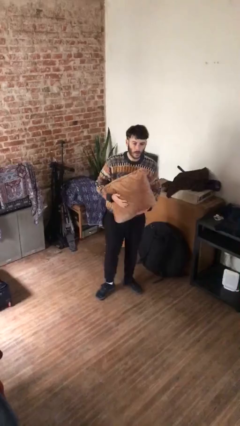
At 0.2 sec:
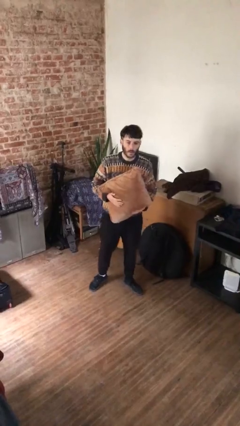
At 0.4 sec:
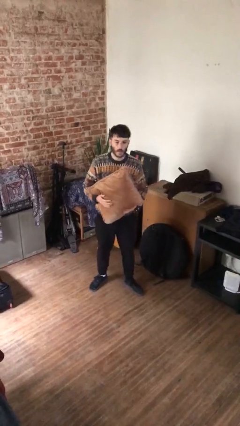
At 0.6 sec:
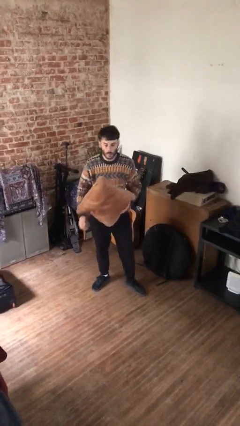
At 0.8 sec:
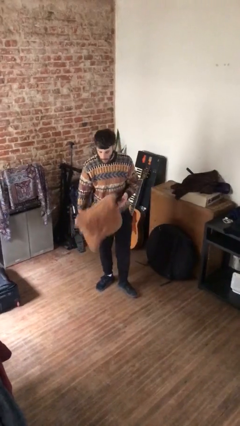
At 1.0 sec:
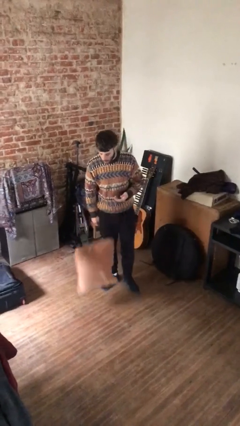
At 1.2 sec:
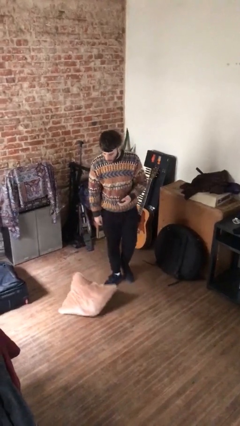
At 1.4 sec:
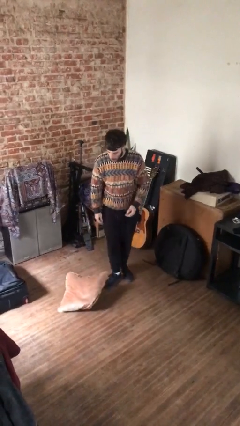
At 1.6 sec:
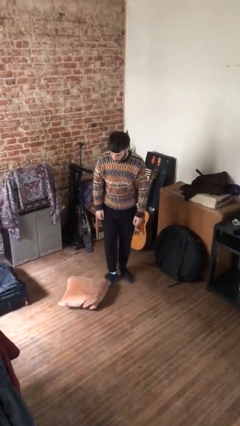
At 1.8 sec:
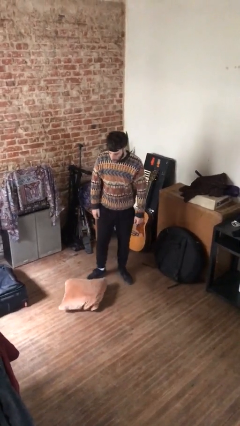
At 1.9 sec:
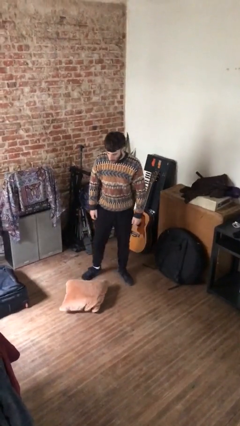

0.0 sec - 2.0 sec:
person drops object

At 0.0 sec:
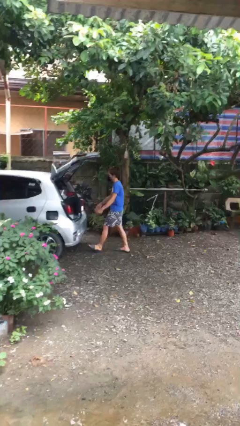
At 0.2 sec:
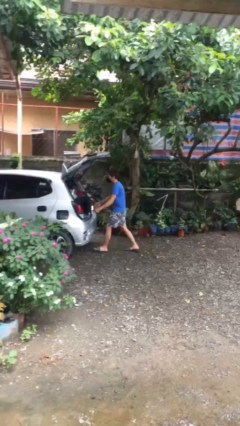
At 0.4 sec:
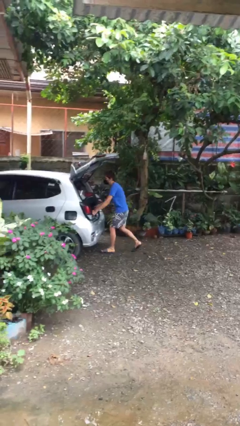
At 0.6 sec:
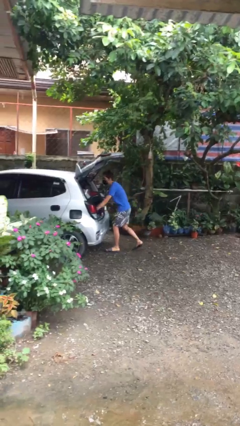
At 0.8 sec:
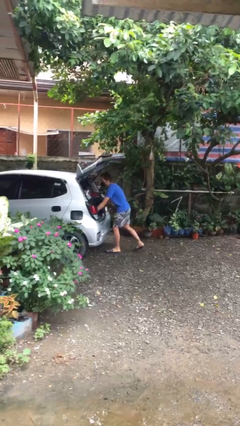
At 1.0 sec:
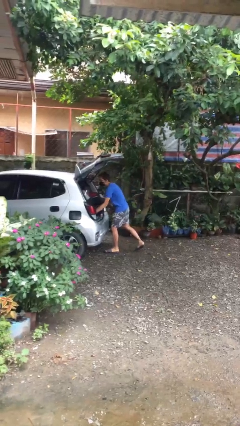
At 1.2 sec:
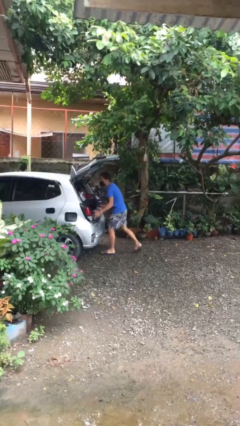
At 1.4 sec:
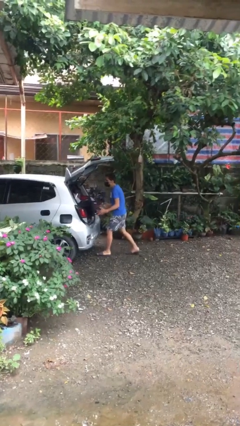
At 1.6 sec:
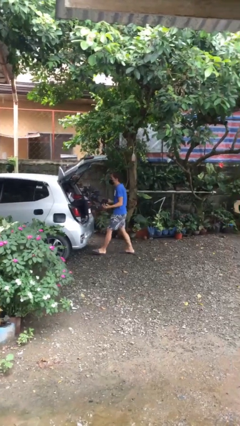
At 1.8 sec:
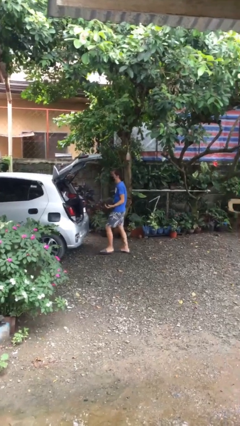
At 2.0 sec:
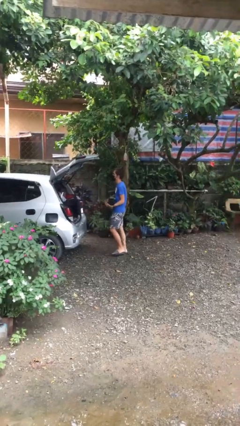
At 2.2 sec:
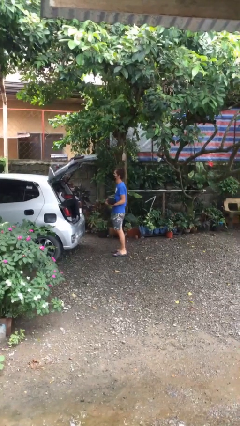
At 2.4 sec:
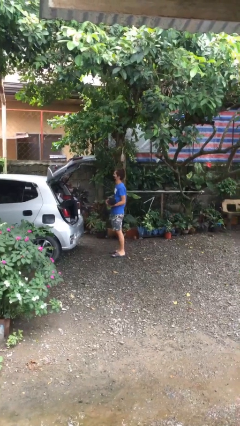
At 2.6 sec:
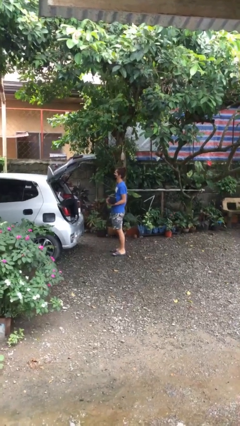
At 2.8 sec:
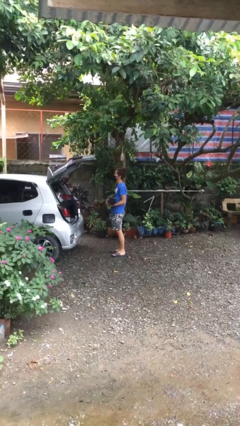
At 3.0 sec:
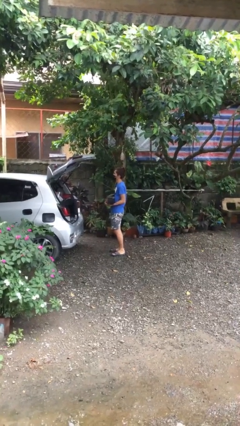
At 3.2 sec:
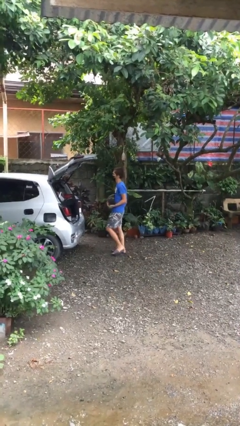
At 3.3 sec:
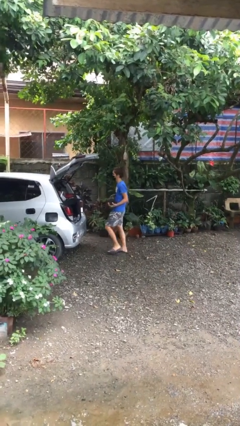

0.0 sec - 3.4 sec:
person unloads car

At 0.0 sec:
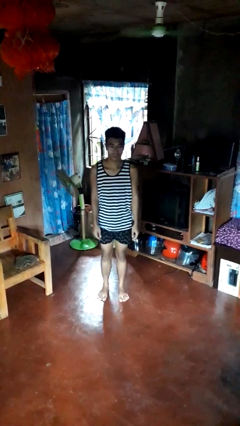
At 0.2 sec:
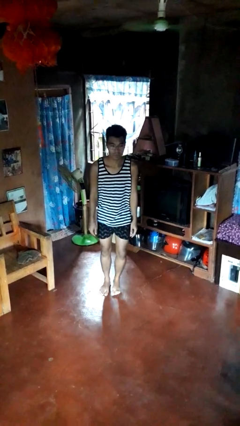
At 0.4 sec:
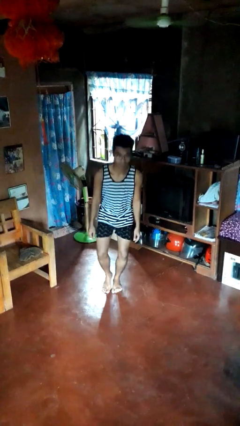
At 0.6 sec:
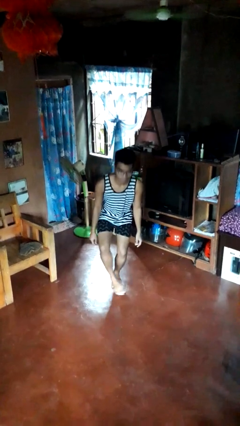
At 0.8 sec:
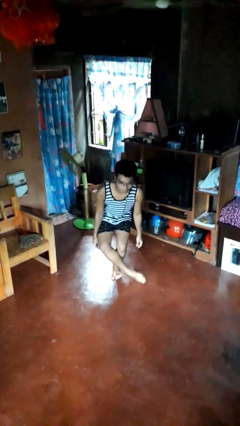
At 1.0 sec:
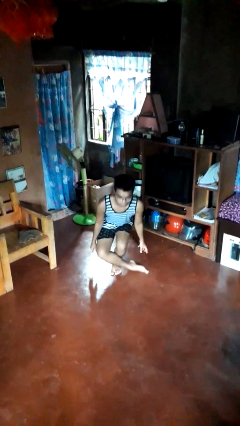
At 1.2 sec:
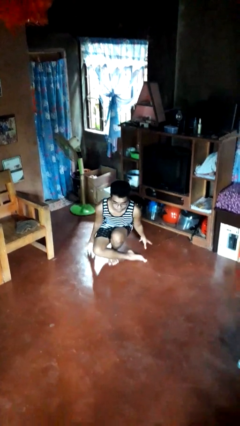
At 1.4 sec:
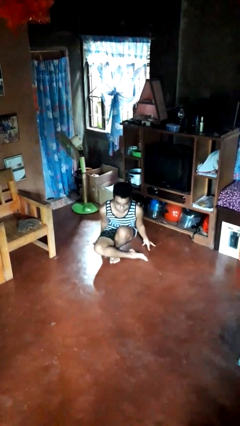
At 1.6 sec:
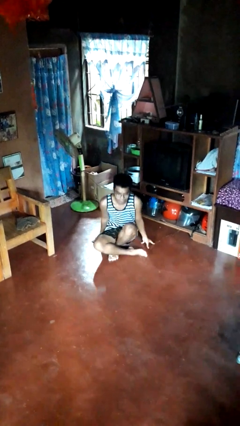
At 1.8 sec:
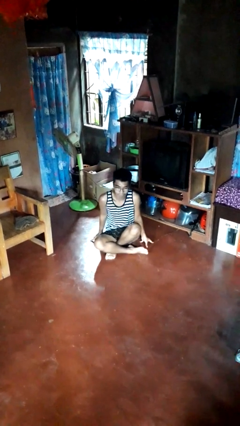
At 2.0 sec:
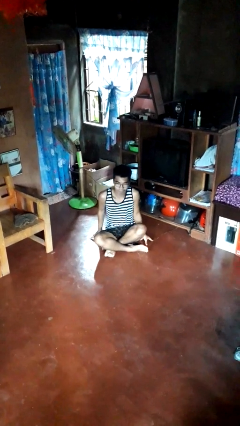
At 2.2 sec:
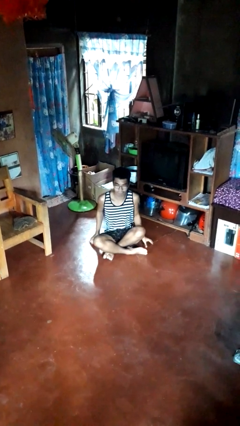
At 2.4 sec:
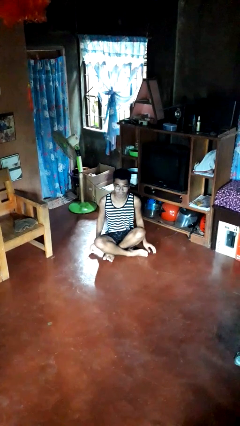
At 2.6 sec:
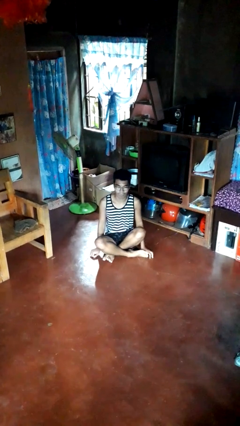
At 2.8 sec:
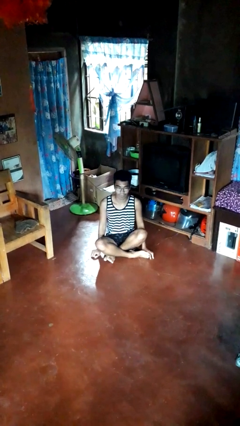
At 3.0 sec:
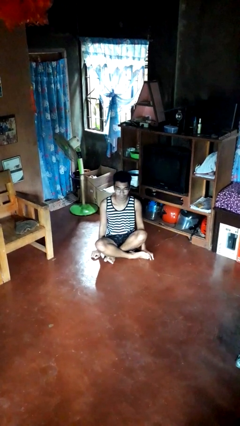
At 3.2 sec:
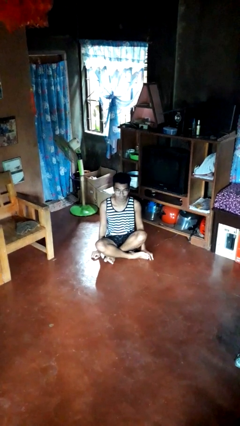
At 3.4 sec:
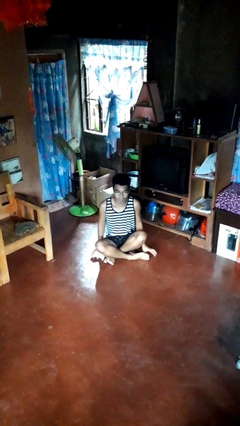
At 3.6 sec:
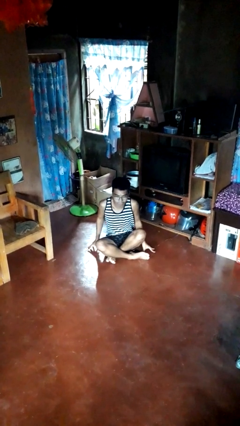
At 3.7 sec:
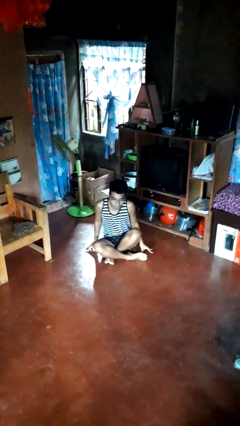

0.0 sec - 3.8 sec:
person sits crisscross

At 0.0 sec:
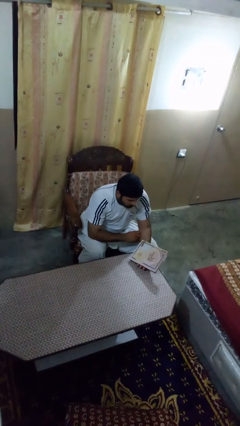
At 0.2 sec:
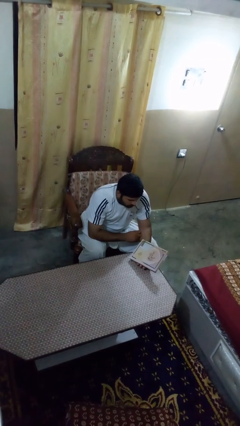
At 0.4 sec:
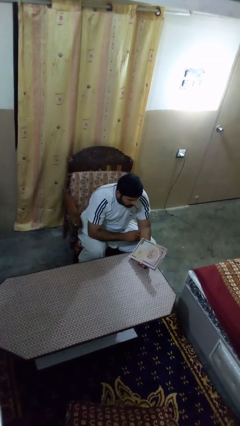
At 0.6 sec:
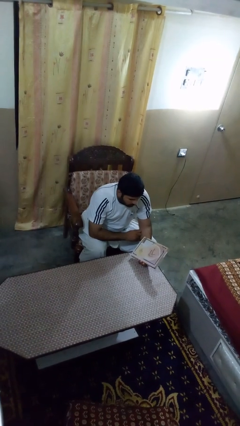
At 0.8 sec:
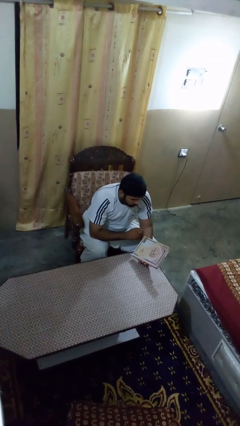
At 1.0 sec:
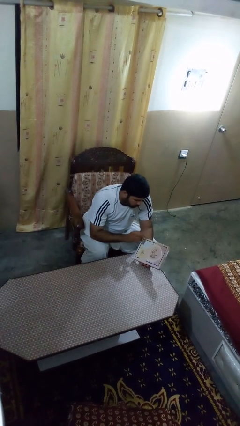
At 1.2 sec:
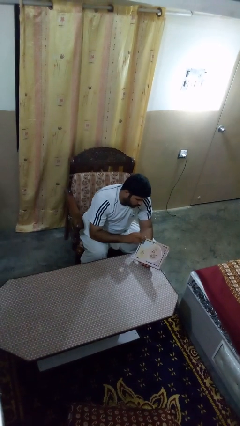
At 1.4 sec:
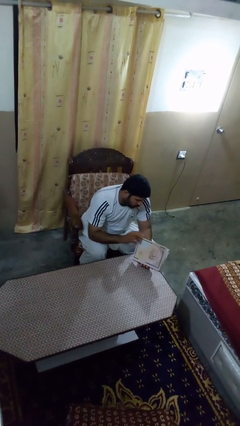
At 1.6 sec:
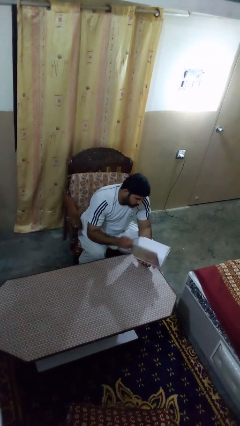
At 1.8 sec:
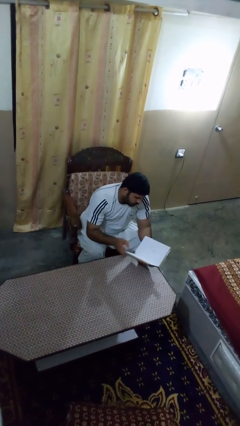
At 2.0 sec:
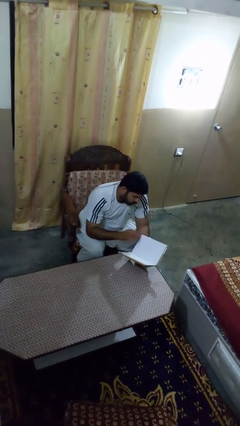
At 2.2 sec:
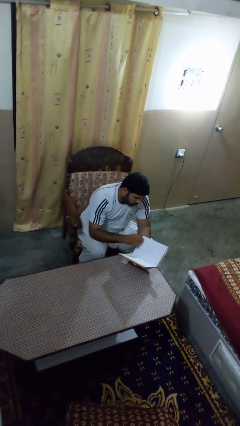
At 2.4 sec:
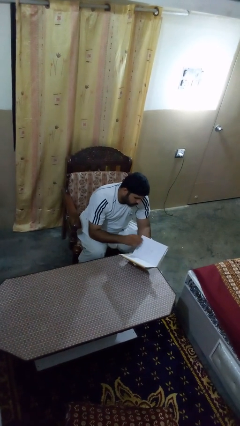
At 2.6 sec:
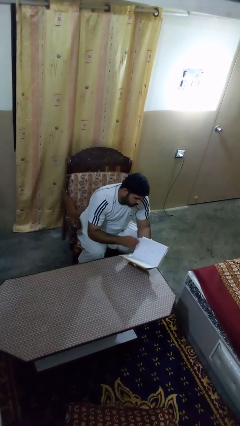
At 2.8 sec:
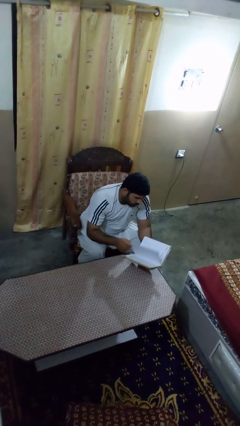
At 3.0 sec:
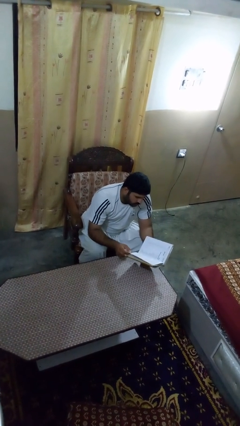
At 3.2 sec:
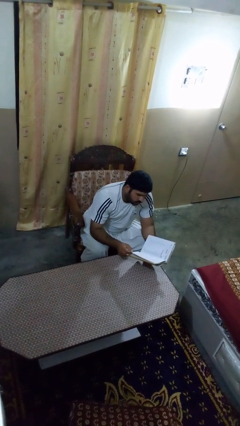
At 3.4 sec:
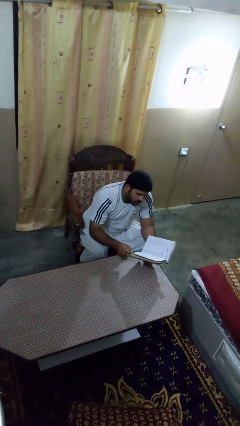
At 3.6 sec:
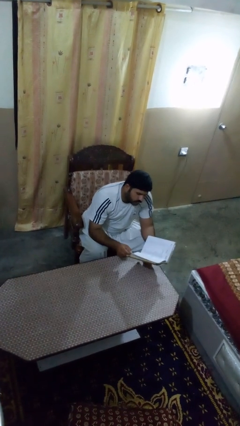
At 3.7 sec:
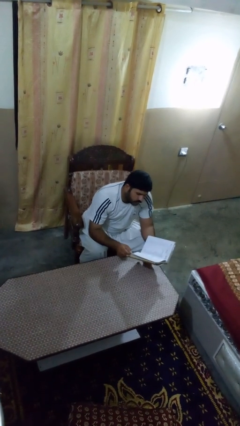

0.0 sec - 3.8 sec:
person reads book

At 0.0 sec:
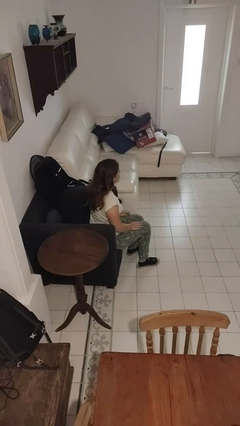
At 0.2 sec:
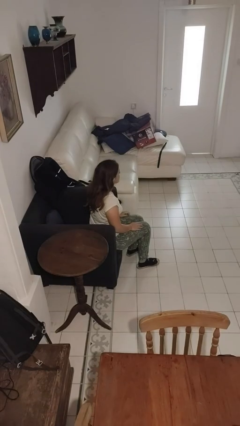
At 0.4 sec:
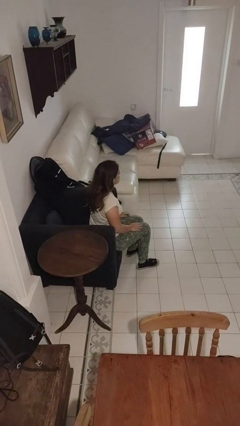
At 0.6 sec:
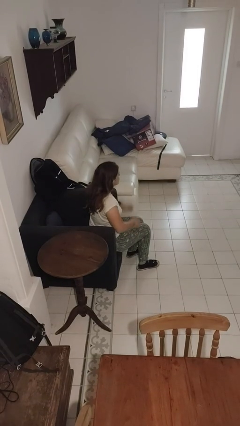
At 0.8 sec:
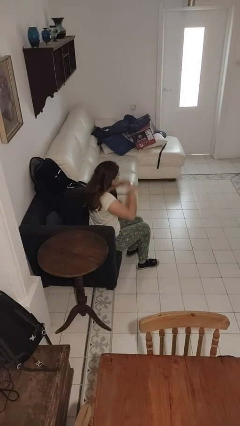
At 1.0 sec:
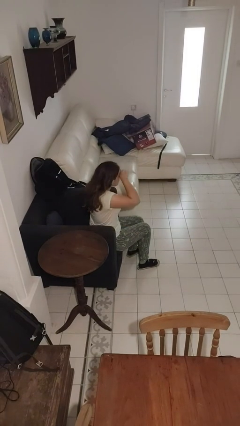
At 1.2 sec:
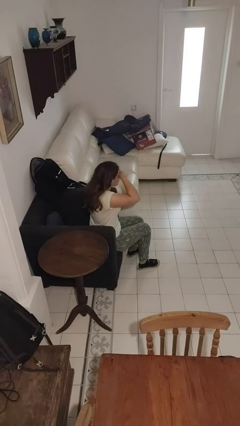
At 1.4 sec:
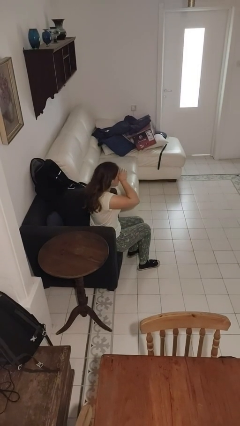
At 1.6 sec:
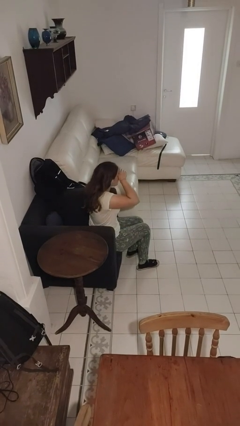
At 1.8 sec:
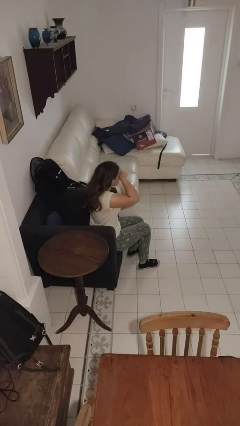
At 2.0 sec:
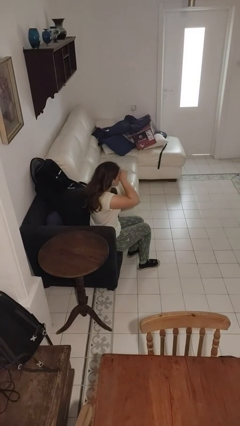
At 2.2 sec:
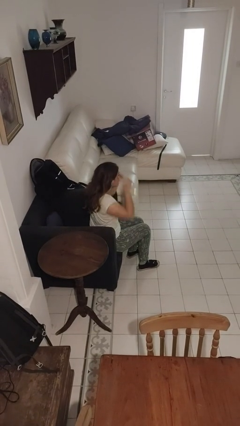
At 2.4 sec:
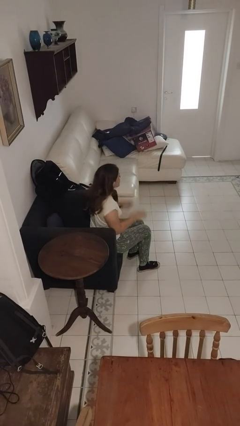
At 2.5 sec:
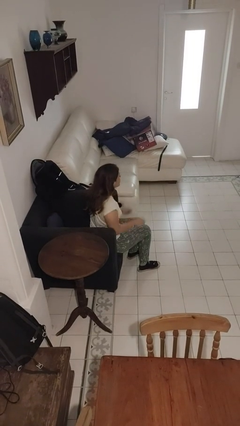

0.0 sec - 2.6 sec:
person rubs eyes

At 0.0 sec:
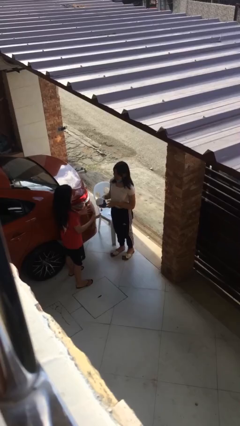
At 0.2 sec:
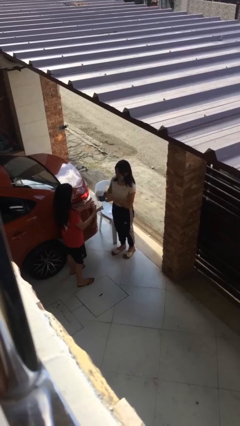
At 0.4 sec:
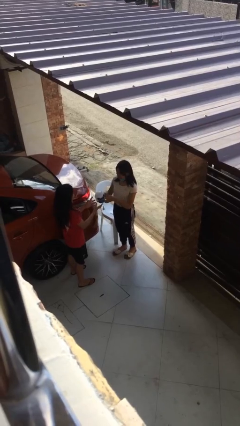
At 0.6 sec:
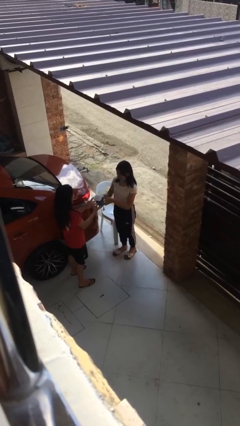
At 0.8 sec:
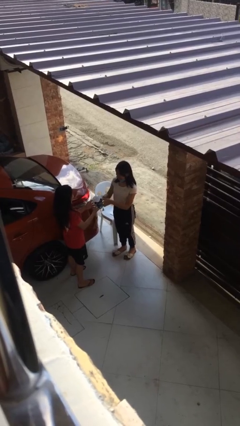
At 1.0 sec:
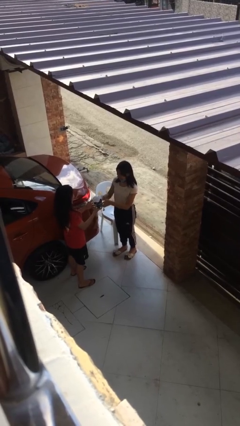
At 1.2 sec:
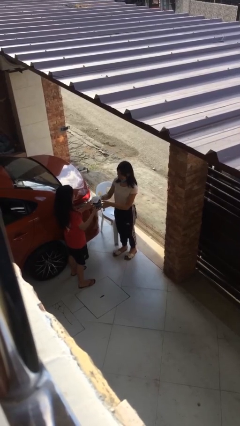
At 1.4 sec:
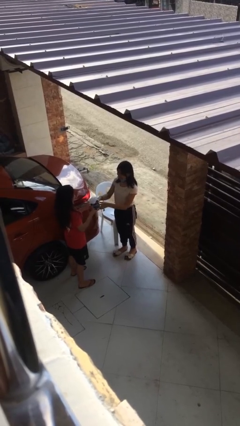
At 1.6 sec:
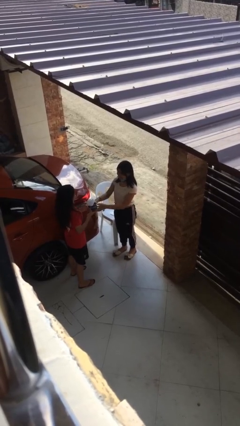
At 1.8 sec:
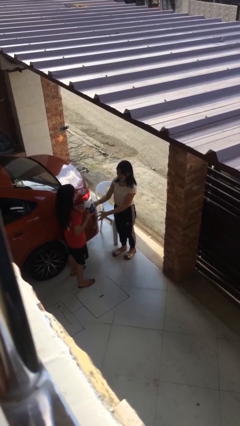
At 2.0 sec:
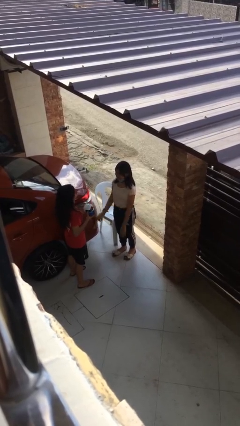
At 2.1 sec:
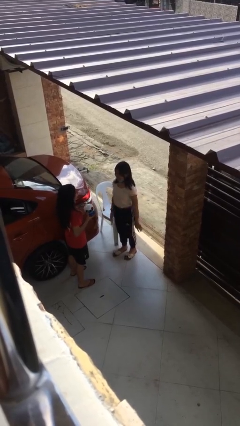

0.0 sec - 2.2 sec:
person transfers object to person
